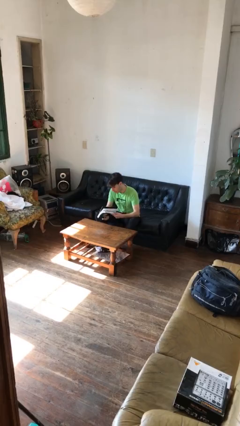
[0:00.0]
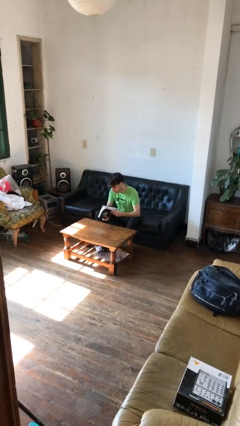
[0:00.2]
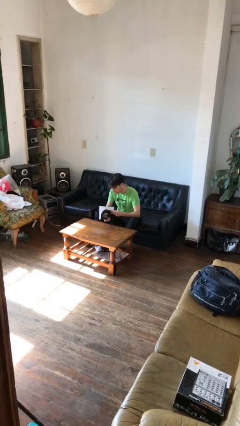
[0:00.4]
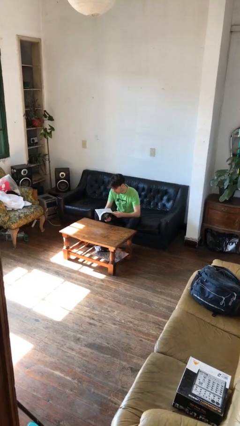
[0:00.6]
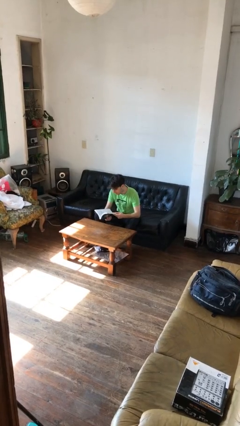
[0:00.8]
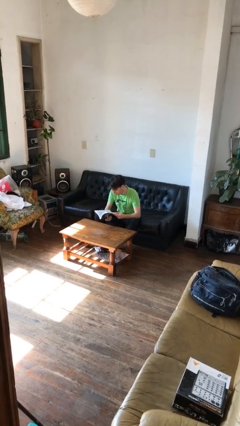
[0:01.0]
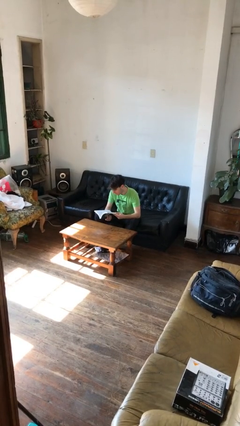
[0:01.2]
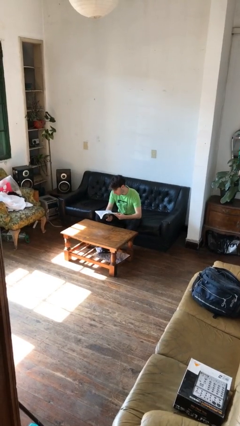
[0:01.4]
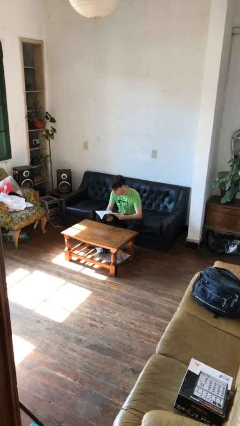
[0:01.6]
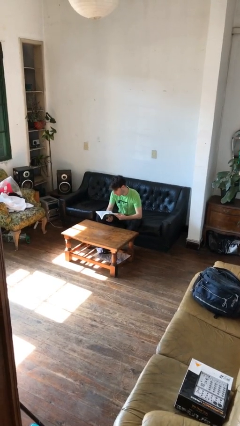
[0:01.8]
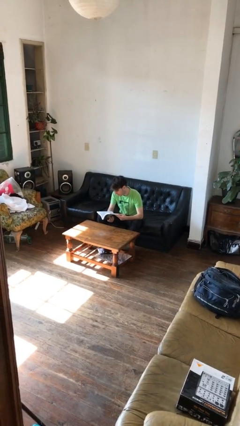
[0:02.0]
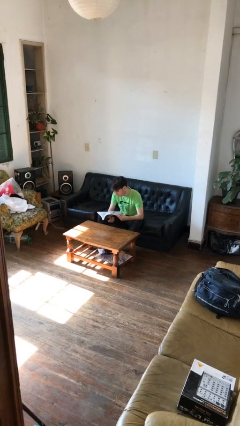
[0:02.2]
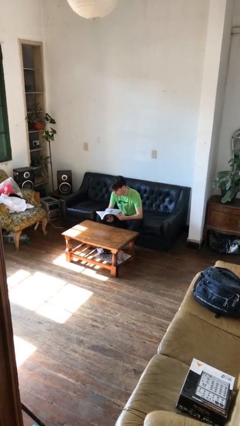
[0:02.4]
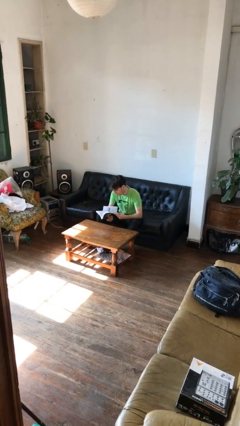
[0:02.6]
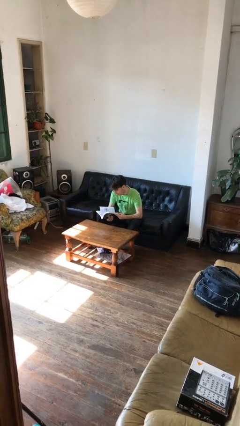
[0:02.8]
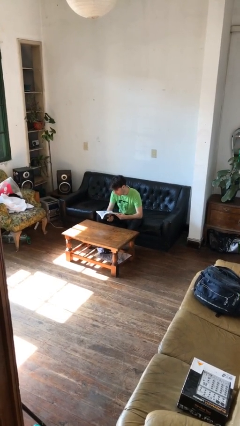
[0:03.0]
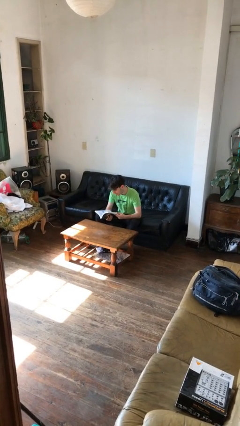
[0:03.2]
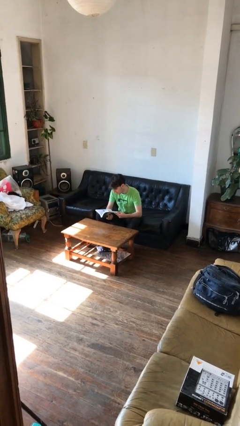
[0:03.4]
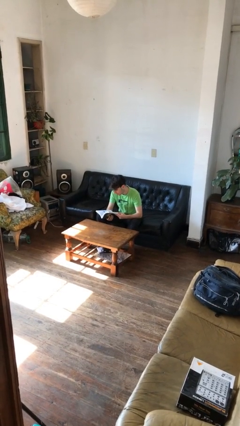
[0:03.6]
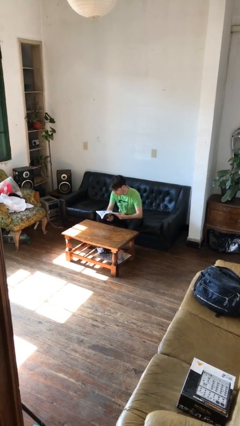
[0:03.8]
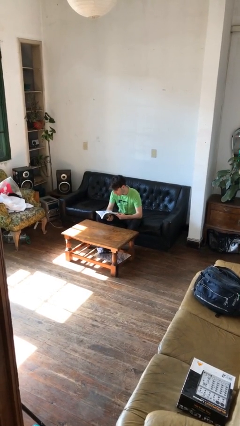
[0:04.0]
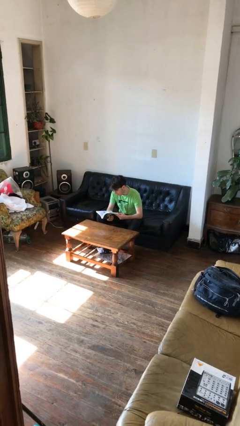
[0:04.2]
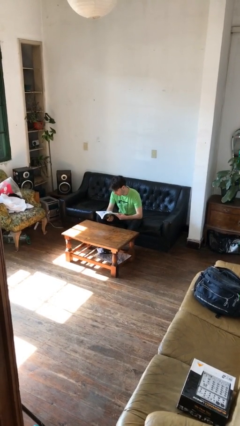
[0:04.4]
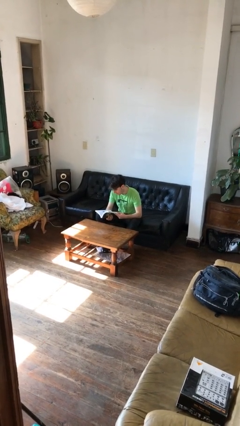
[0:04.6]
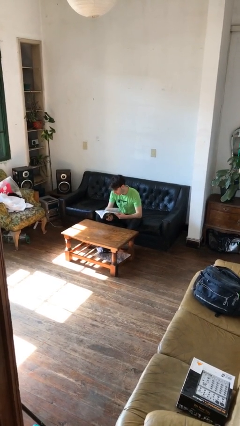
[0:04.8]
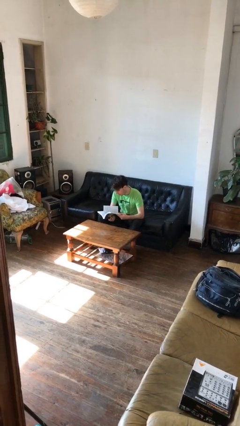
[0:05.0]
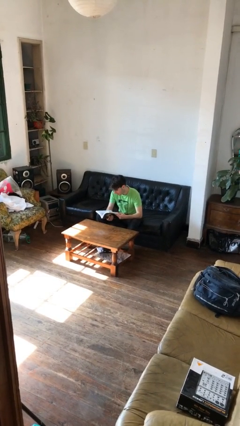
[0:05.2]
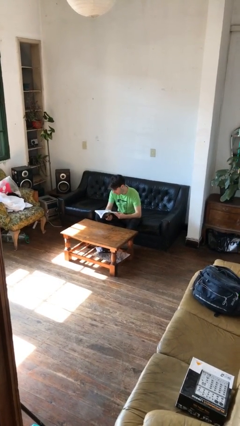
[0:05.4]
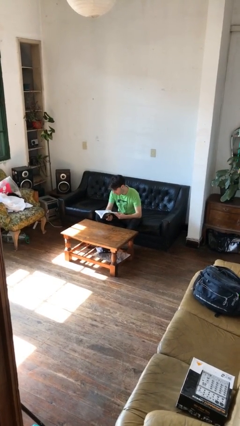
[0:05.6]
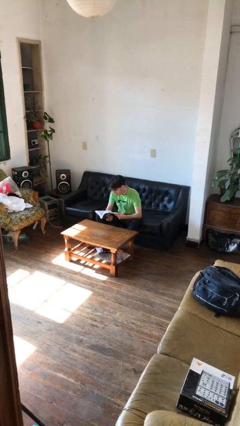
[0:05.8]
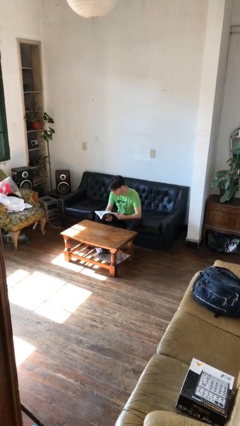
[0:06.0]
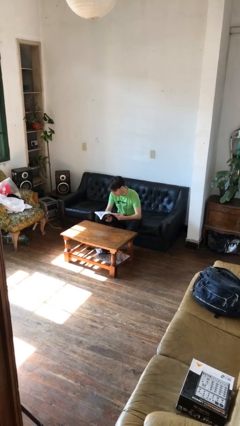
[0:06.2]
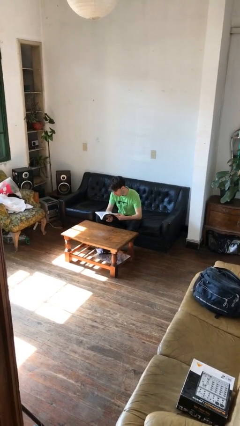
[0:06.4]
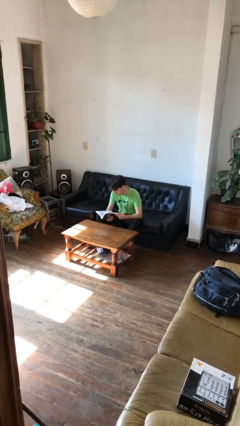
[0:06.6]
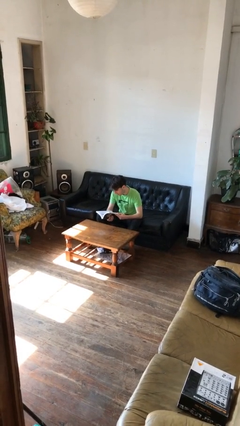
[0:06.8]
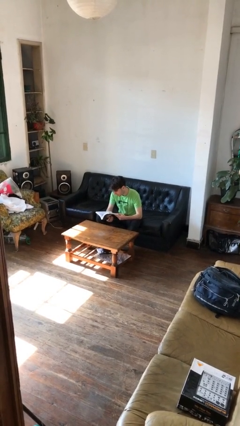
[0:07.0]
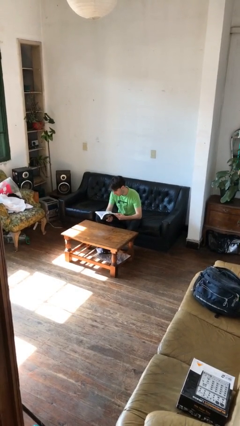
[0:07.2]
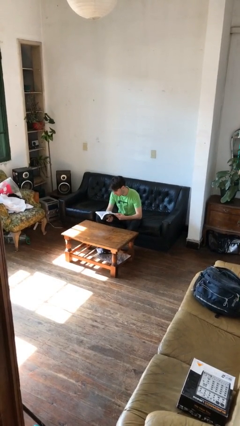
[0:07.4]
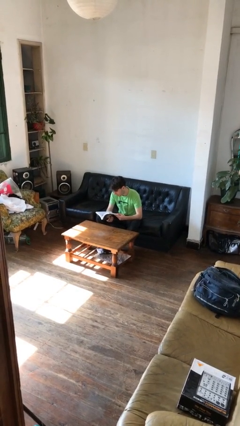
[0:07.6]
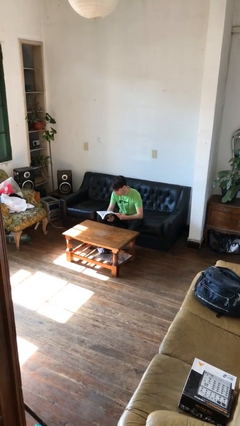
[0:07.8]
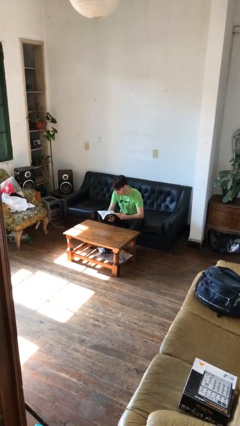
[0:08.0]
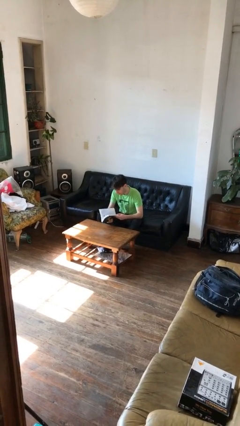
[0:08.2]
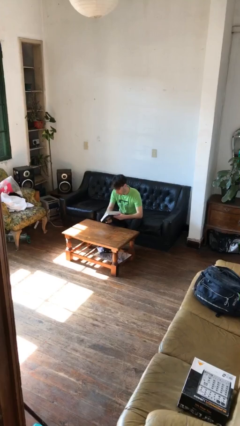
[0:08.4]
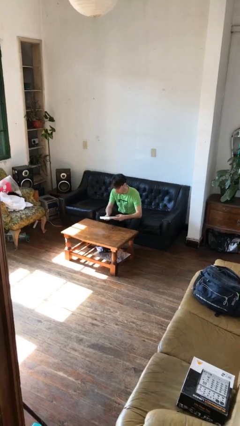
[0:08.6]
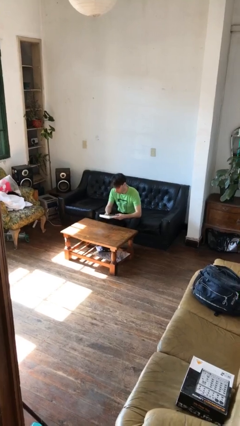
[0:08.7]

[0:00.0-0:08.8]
person reads document

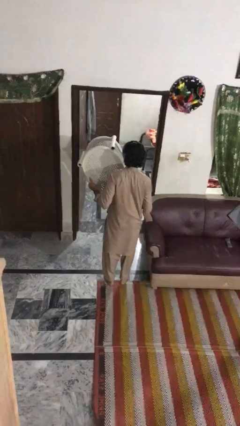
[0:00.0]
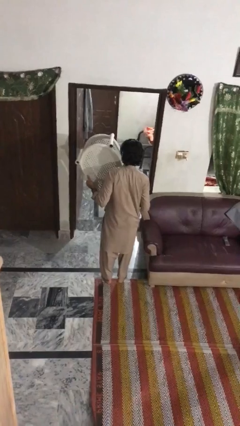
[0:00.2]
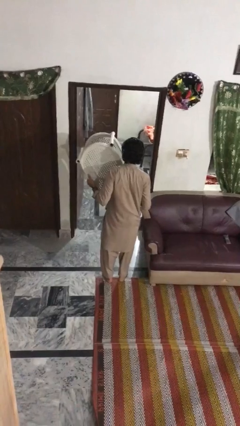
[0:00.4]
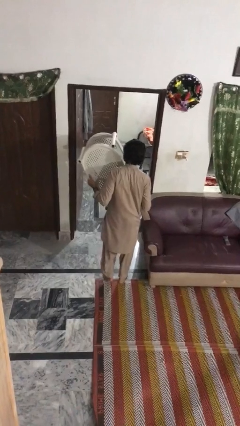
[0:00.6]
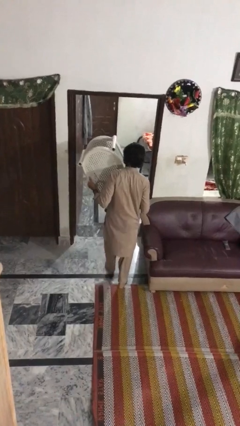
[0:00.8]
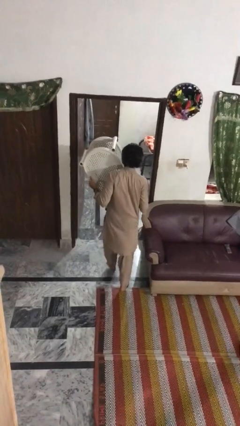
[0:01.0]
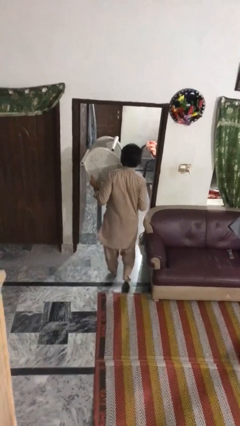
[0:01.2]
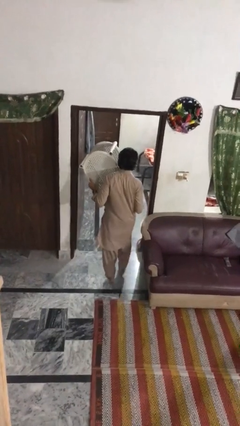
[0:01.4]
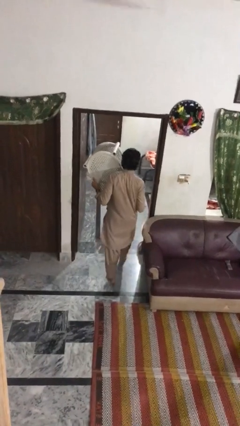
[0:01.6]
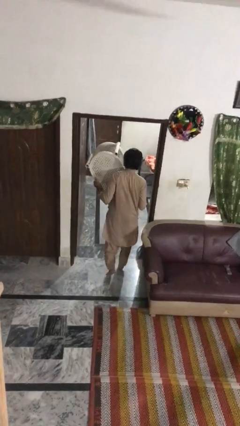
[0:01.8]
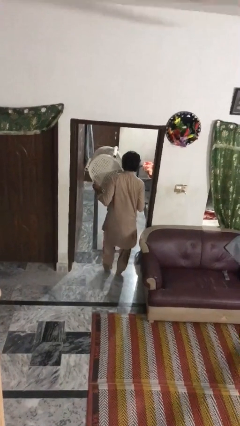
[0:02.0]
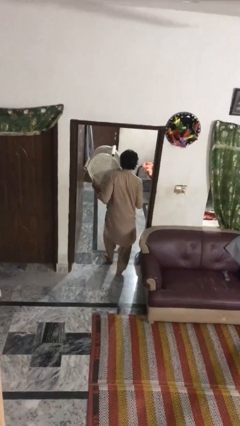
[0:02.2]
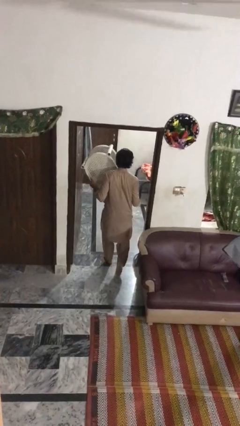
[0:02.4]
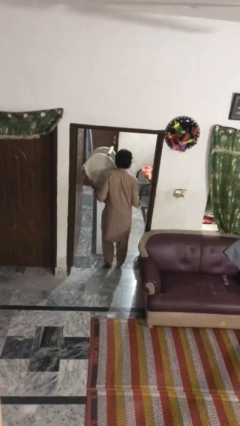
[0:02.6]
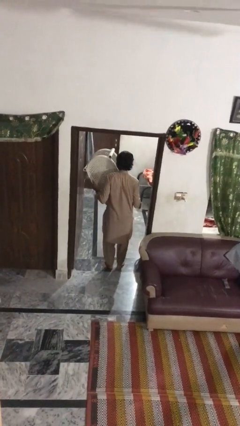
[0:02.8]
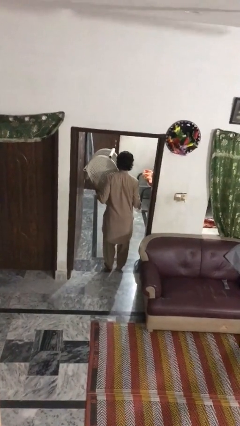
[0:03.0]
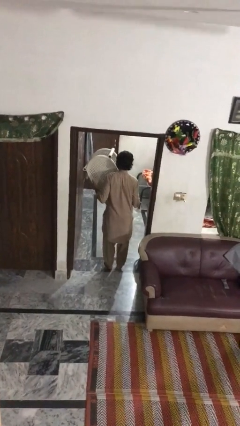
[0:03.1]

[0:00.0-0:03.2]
person carries furniture

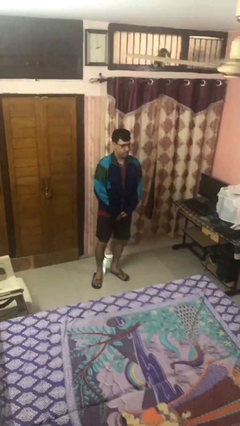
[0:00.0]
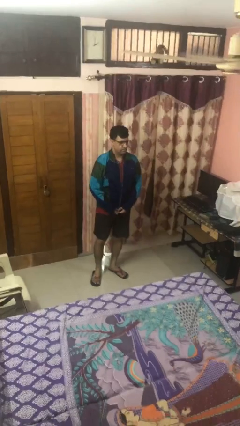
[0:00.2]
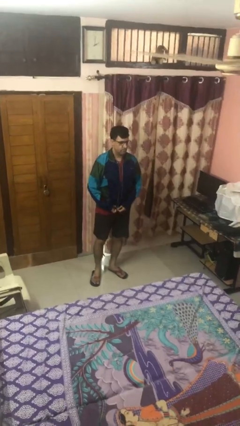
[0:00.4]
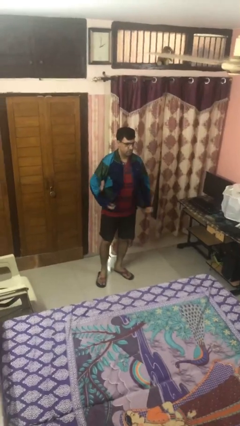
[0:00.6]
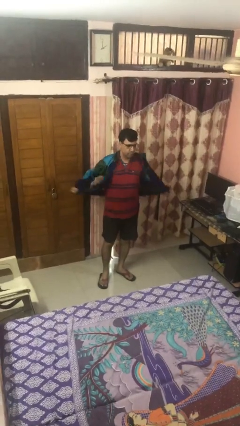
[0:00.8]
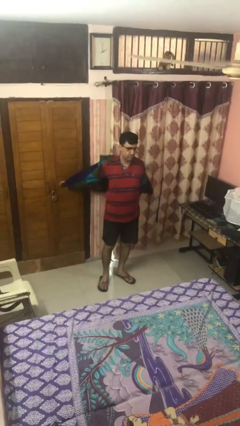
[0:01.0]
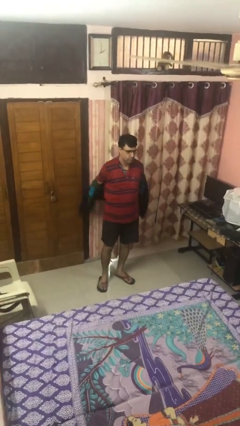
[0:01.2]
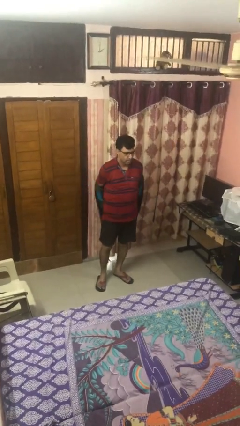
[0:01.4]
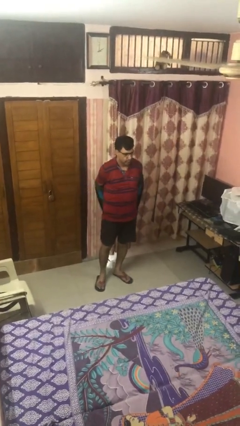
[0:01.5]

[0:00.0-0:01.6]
person takes off jacket

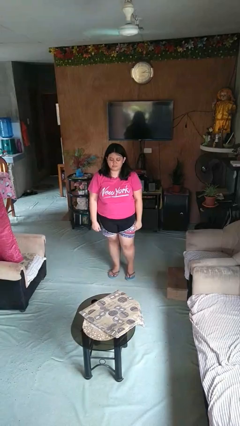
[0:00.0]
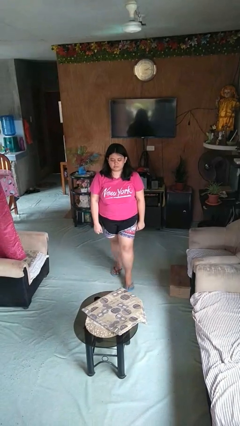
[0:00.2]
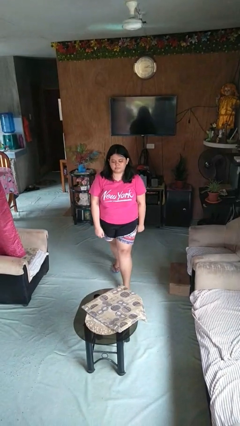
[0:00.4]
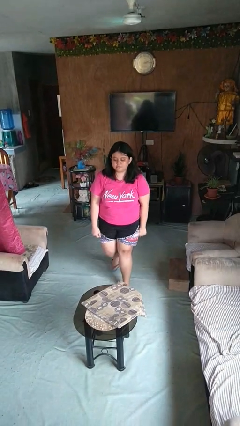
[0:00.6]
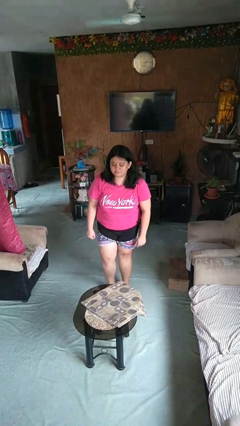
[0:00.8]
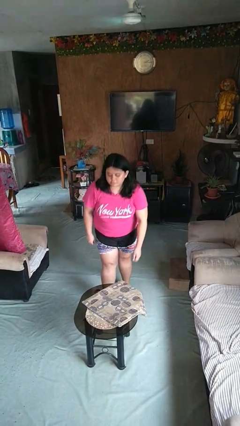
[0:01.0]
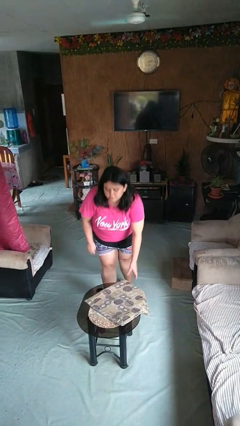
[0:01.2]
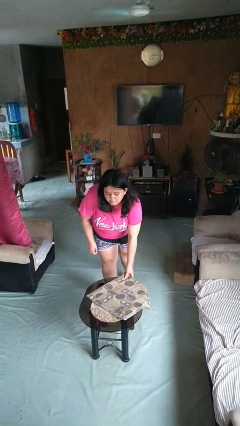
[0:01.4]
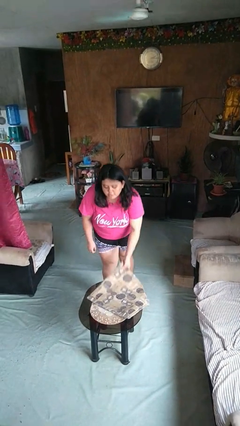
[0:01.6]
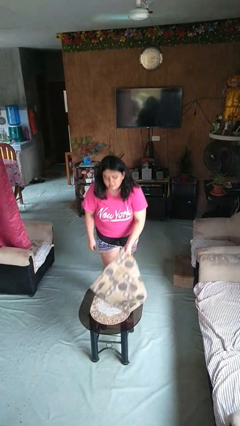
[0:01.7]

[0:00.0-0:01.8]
person picks up object from table

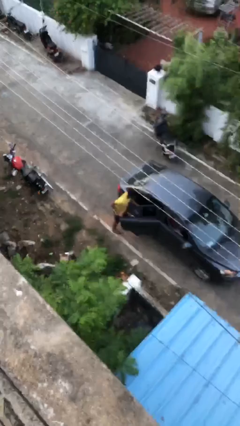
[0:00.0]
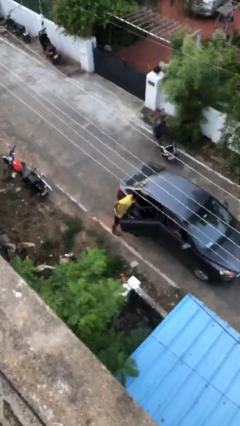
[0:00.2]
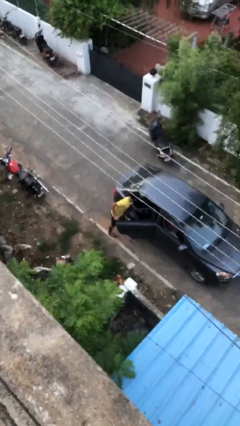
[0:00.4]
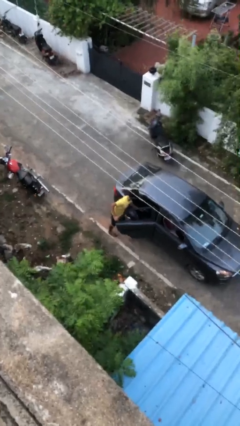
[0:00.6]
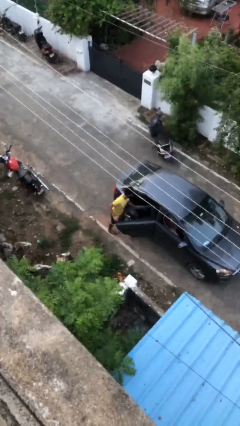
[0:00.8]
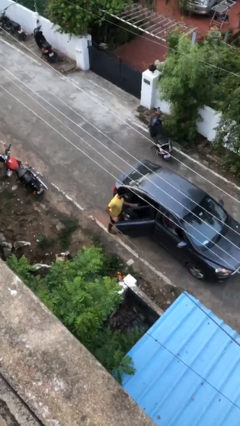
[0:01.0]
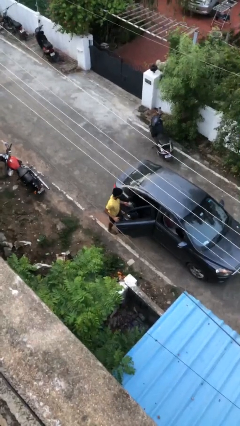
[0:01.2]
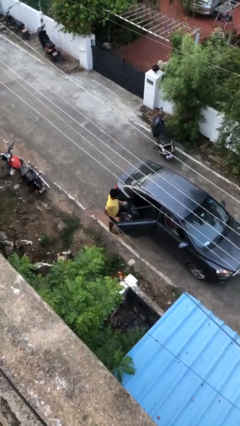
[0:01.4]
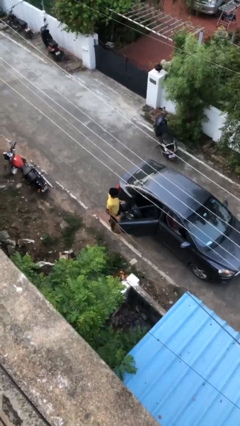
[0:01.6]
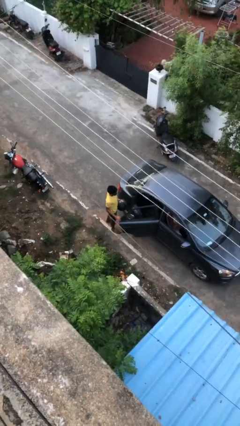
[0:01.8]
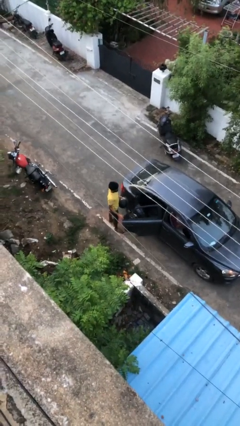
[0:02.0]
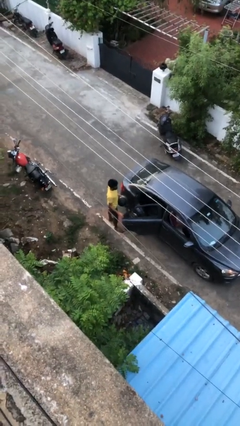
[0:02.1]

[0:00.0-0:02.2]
person unloads car
